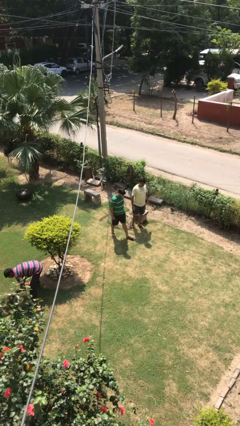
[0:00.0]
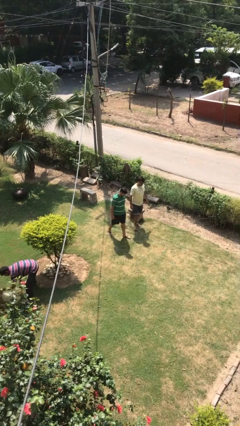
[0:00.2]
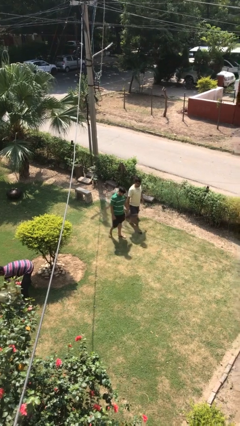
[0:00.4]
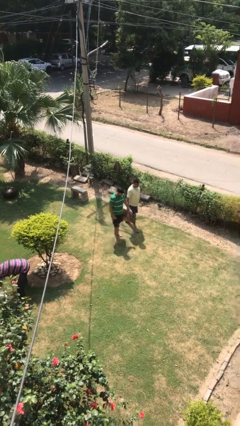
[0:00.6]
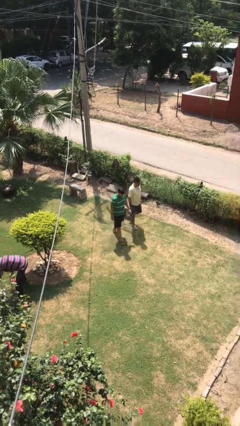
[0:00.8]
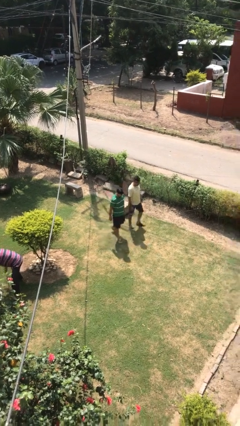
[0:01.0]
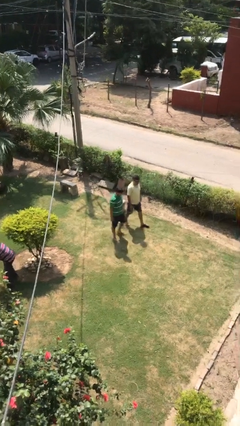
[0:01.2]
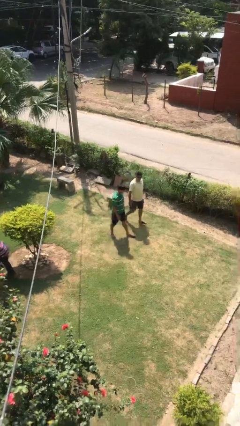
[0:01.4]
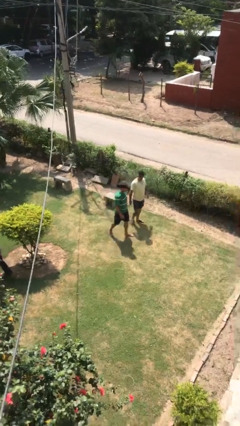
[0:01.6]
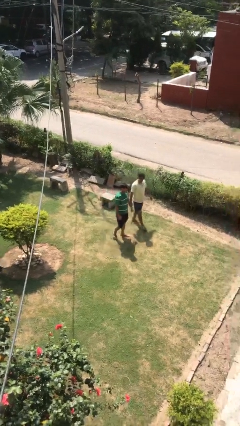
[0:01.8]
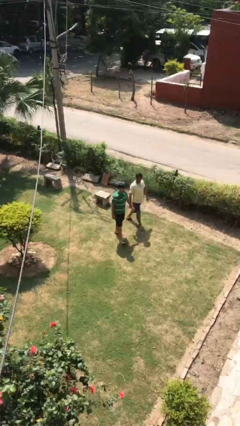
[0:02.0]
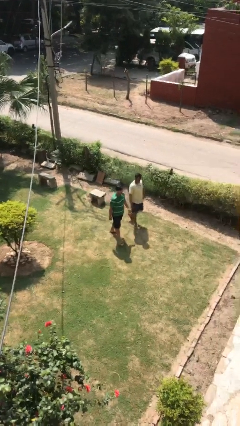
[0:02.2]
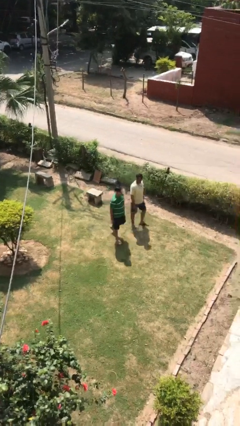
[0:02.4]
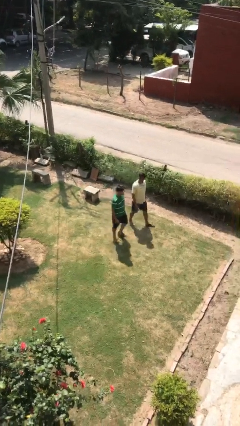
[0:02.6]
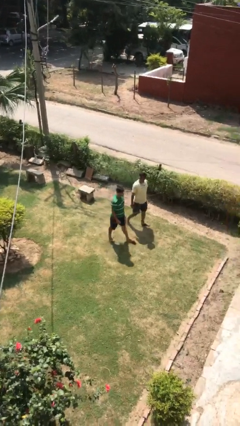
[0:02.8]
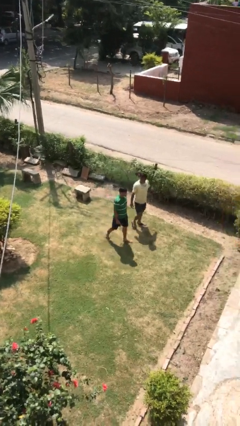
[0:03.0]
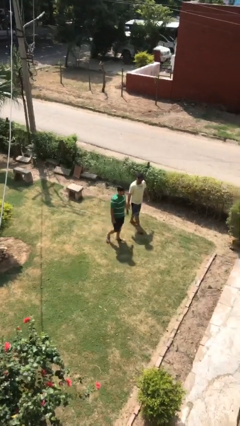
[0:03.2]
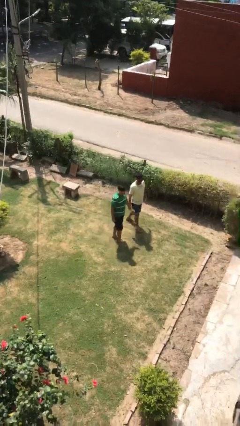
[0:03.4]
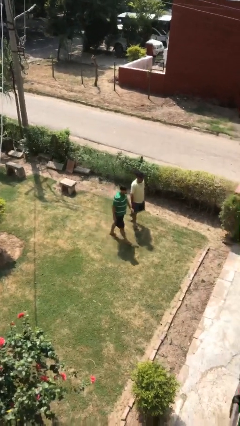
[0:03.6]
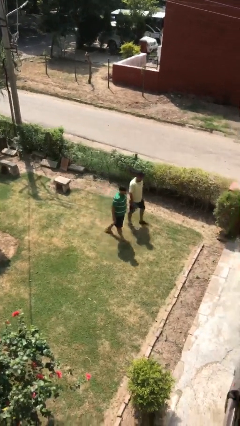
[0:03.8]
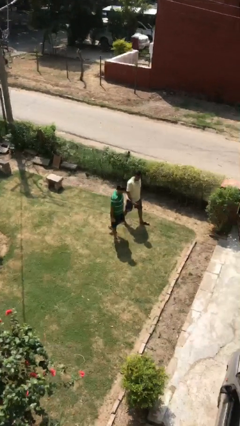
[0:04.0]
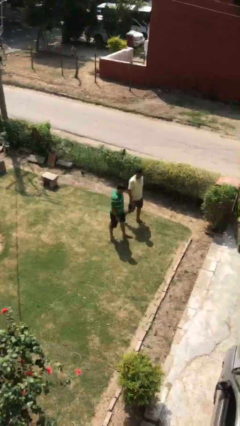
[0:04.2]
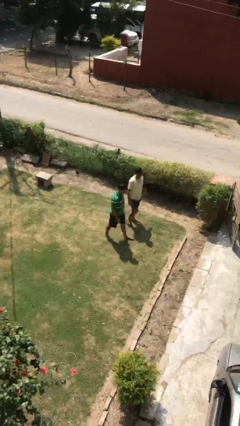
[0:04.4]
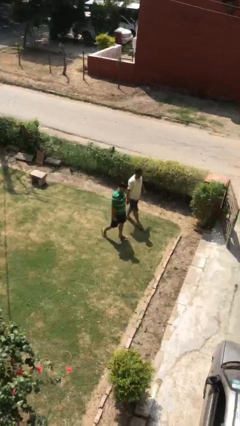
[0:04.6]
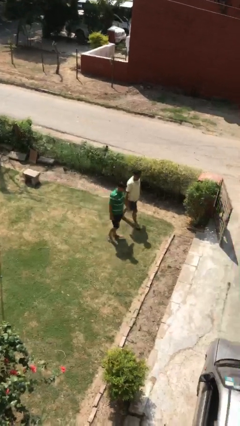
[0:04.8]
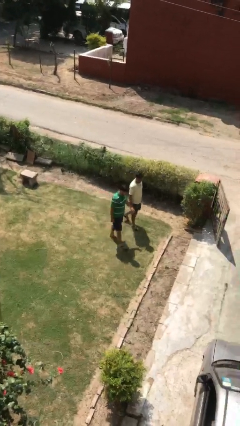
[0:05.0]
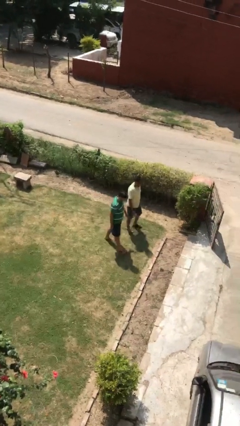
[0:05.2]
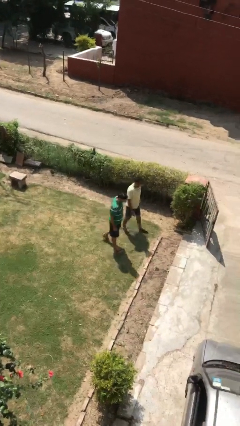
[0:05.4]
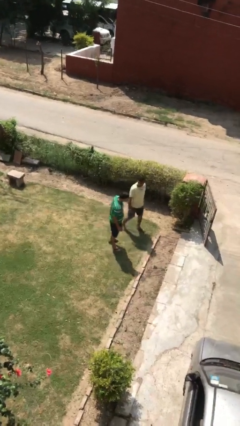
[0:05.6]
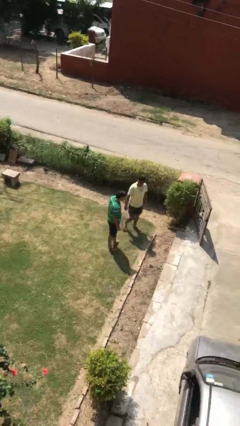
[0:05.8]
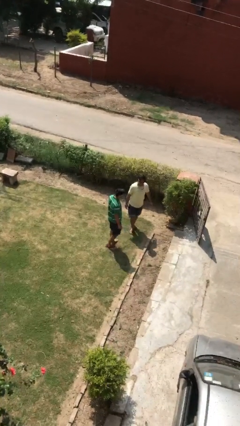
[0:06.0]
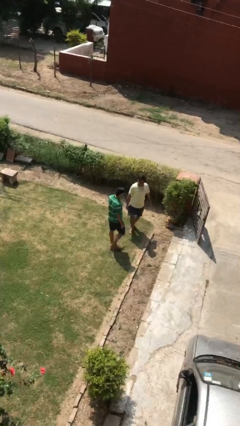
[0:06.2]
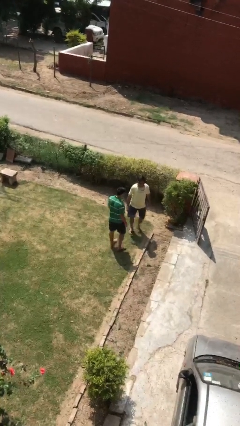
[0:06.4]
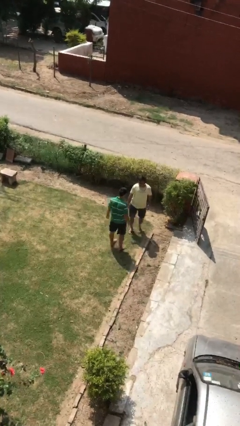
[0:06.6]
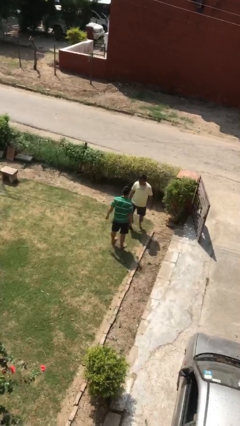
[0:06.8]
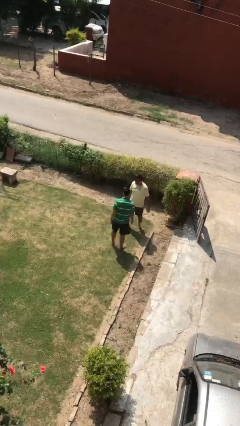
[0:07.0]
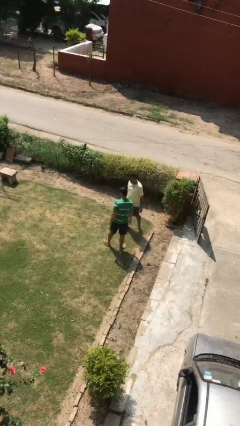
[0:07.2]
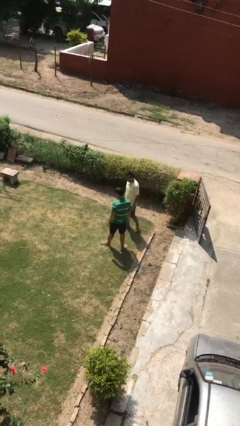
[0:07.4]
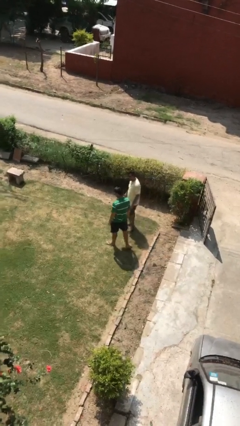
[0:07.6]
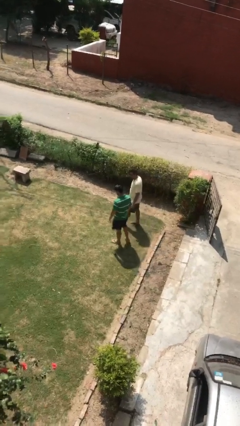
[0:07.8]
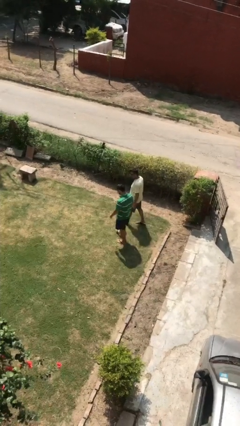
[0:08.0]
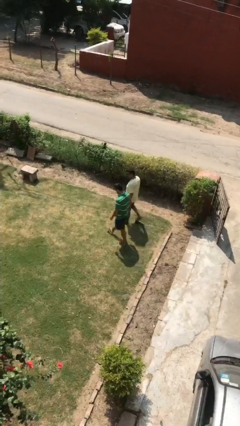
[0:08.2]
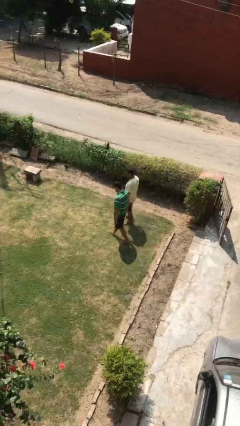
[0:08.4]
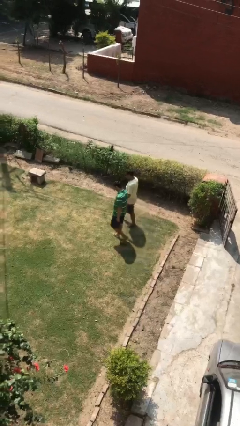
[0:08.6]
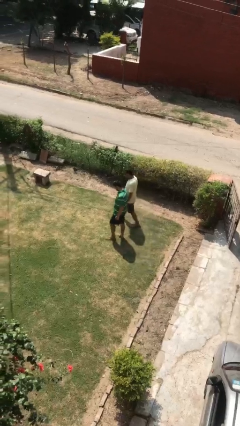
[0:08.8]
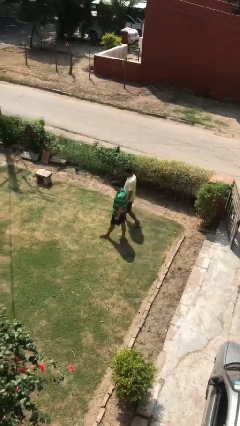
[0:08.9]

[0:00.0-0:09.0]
person talks to person

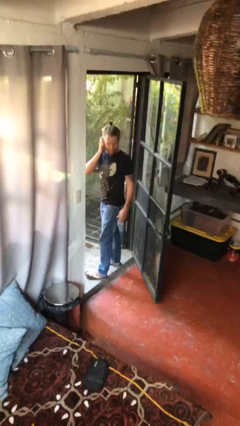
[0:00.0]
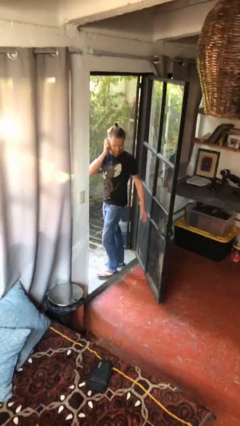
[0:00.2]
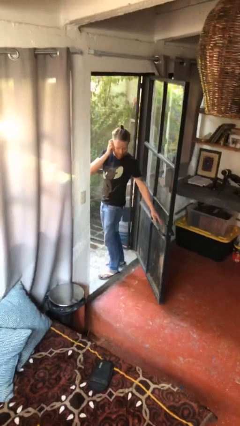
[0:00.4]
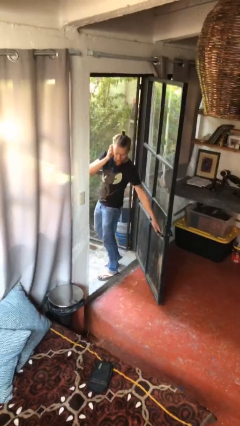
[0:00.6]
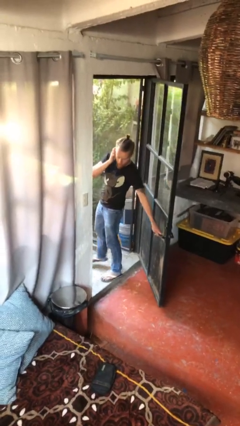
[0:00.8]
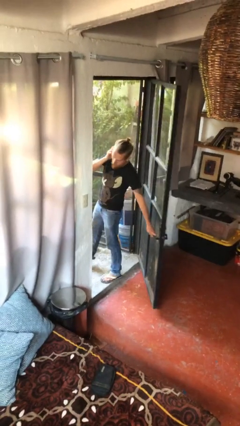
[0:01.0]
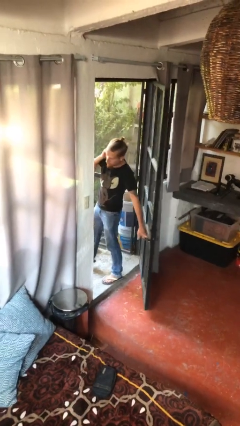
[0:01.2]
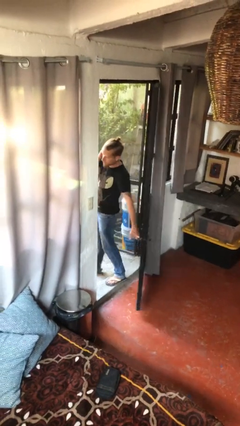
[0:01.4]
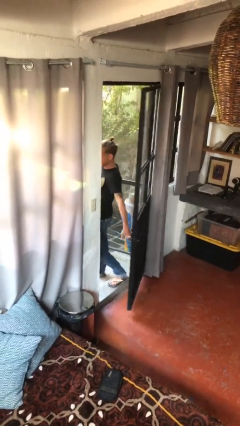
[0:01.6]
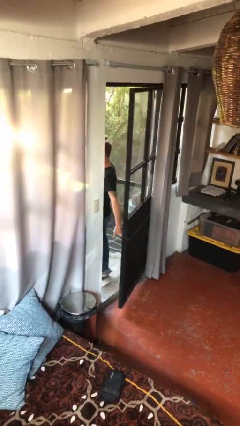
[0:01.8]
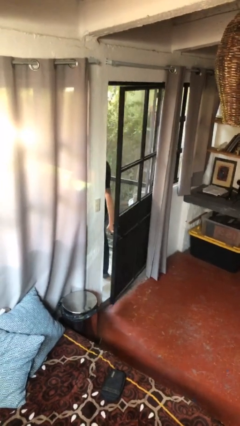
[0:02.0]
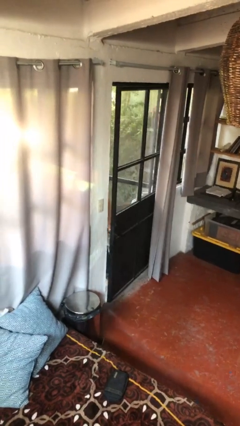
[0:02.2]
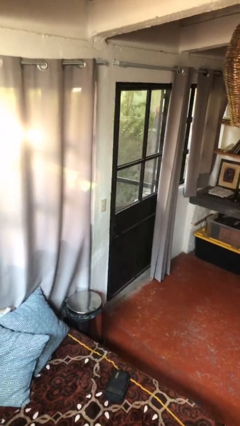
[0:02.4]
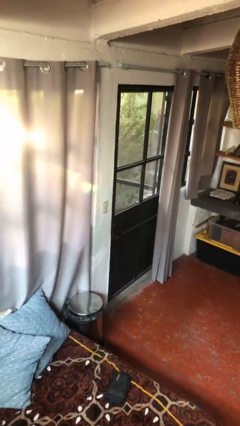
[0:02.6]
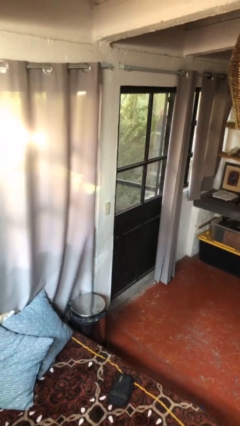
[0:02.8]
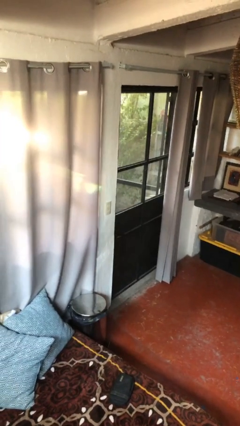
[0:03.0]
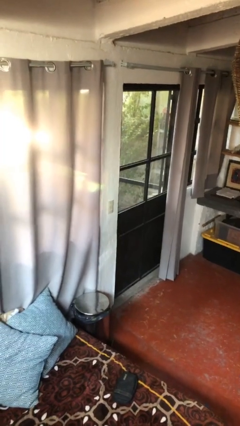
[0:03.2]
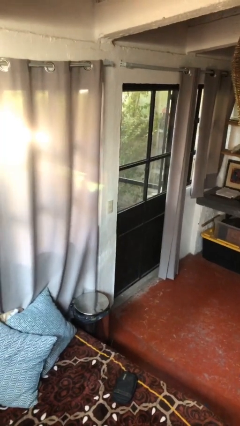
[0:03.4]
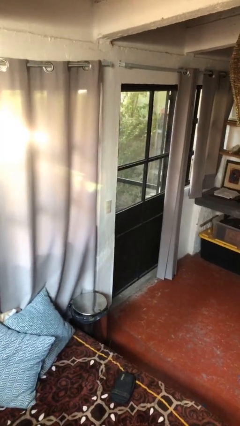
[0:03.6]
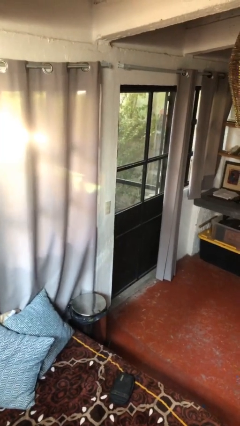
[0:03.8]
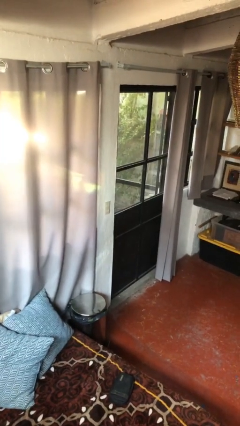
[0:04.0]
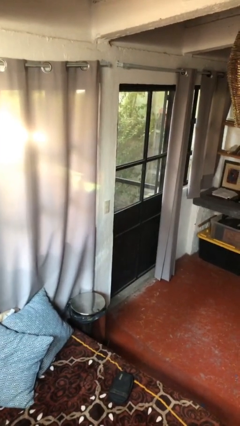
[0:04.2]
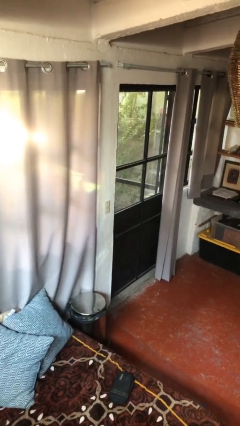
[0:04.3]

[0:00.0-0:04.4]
person closes facility door

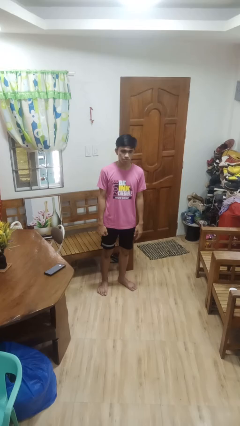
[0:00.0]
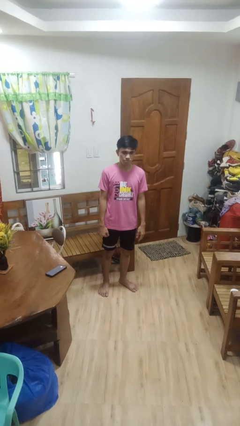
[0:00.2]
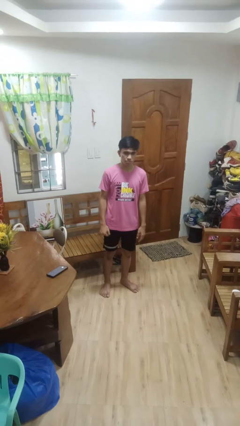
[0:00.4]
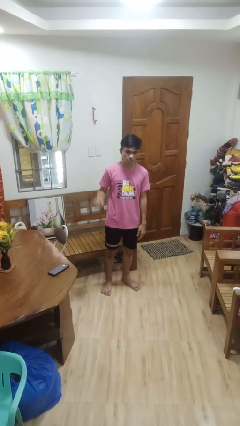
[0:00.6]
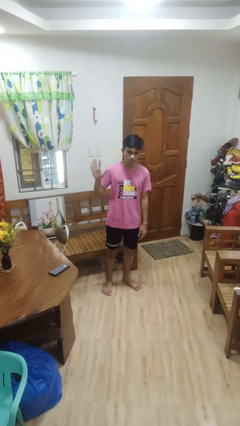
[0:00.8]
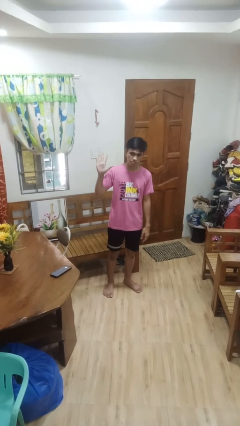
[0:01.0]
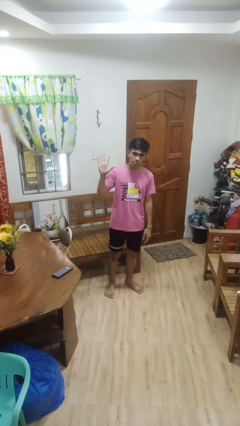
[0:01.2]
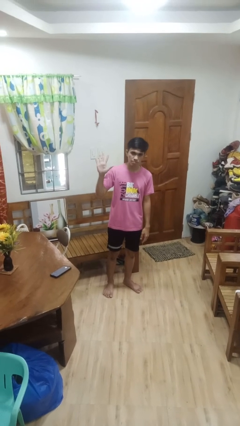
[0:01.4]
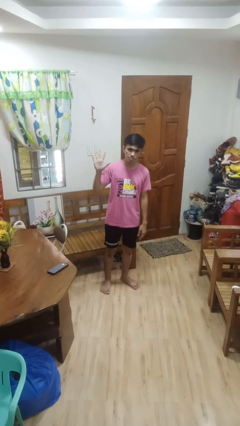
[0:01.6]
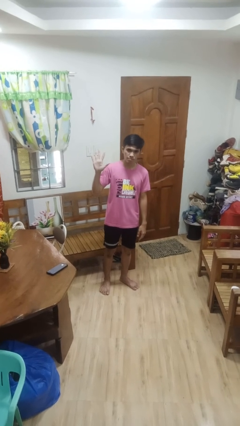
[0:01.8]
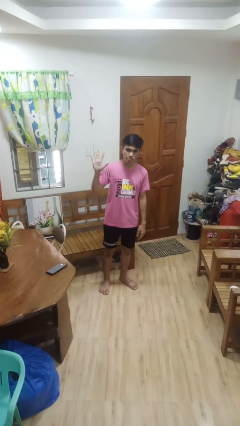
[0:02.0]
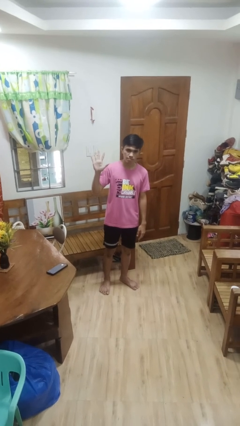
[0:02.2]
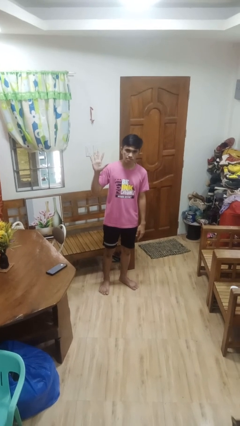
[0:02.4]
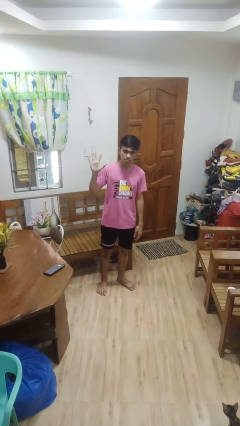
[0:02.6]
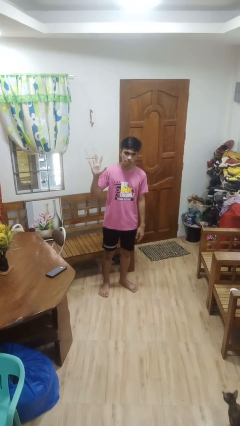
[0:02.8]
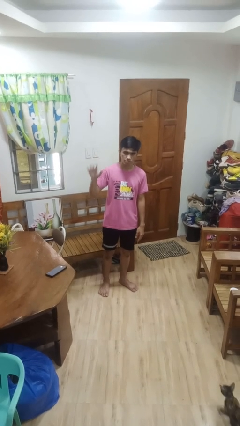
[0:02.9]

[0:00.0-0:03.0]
person gestures number five

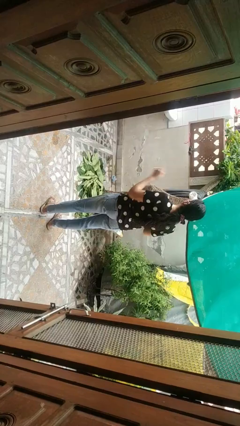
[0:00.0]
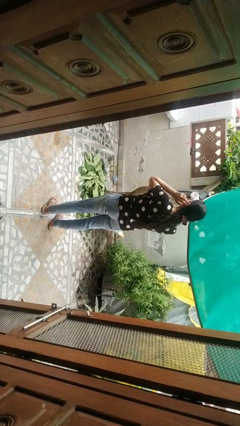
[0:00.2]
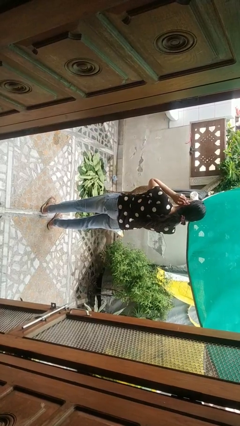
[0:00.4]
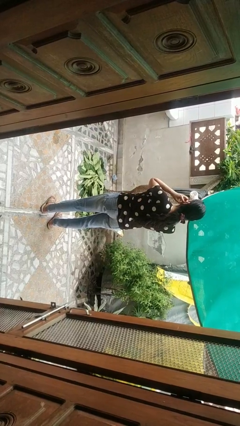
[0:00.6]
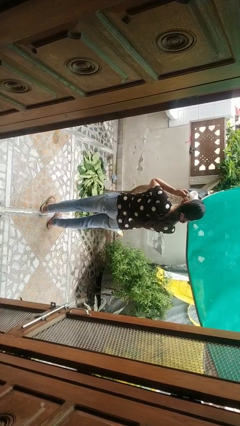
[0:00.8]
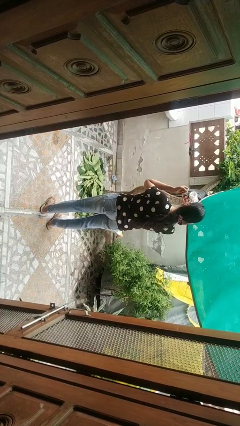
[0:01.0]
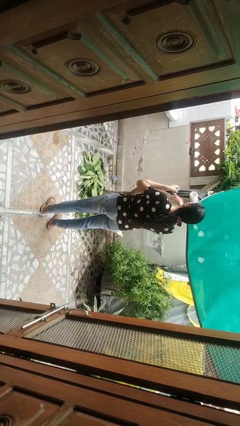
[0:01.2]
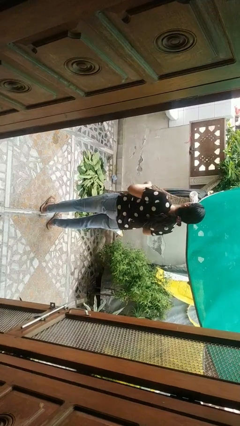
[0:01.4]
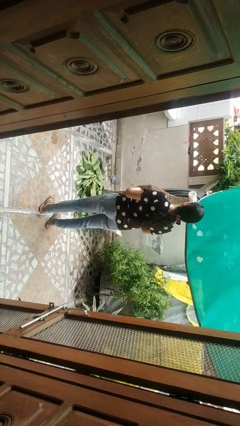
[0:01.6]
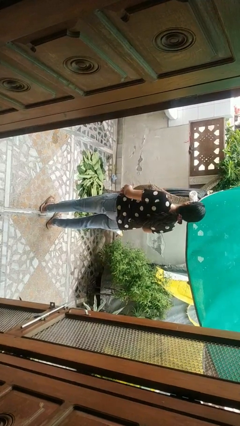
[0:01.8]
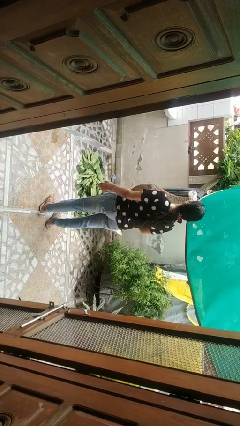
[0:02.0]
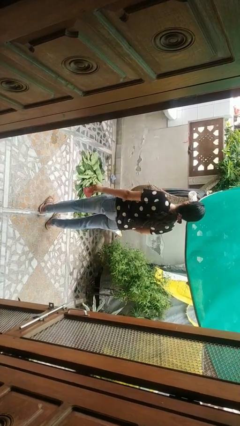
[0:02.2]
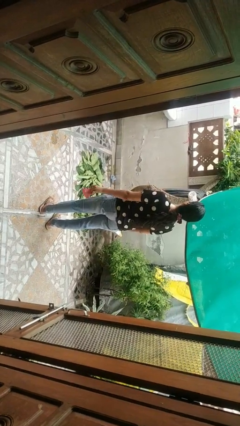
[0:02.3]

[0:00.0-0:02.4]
person takes off facemask
